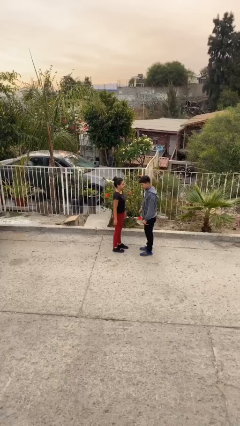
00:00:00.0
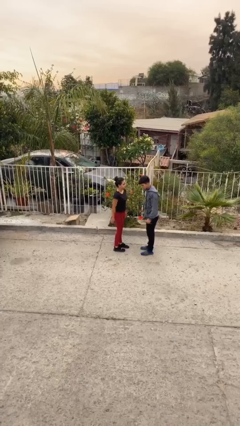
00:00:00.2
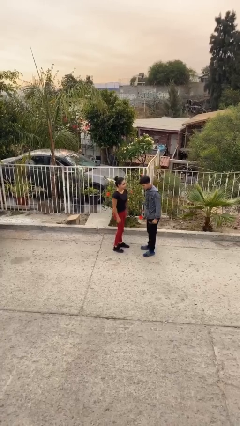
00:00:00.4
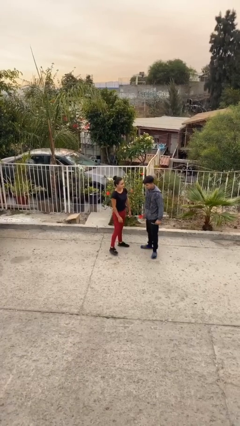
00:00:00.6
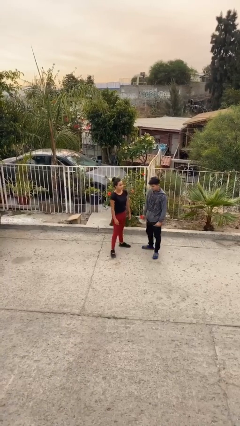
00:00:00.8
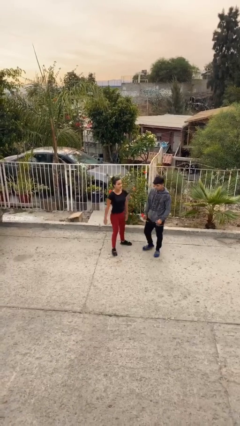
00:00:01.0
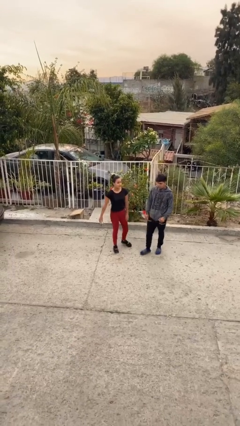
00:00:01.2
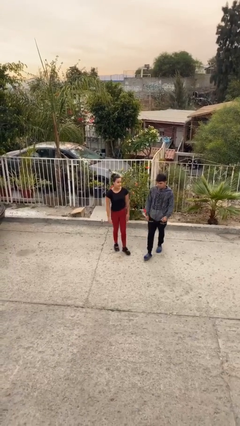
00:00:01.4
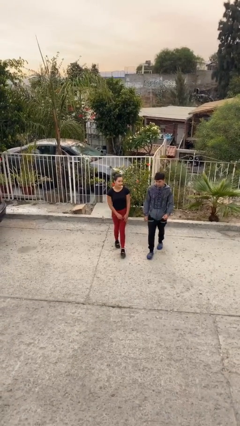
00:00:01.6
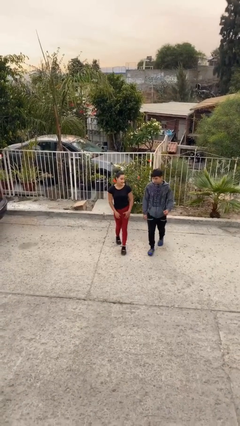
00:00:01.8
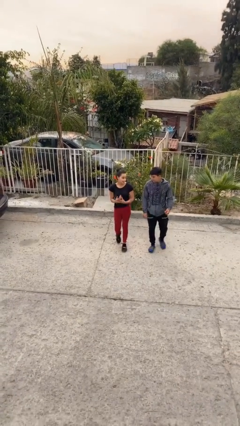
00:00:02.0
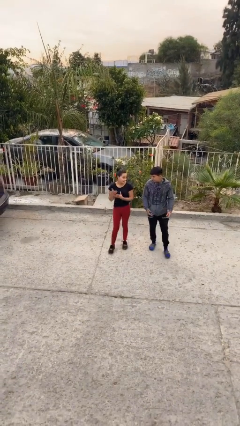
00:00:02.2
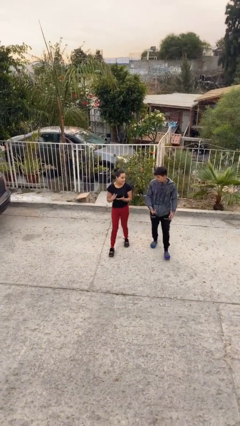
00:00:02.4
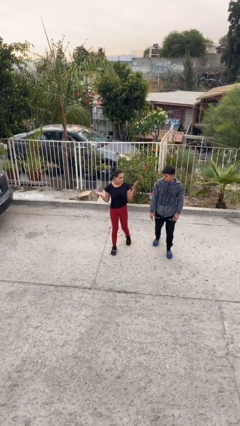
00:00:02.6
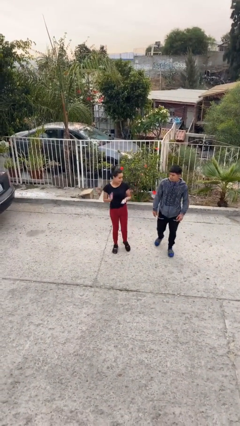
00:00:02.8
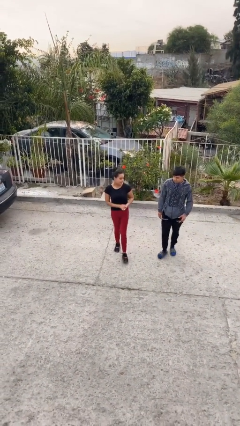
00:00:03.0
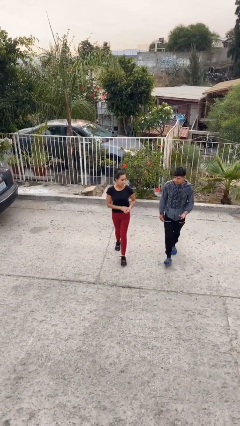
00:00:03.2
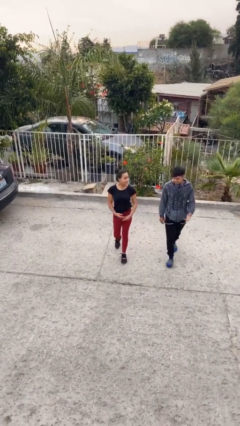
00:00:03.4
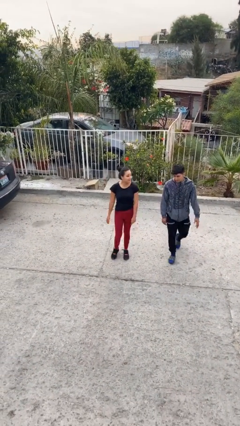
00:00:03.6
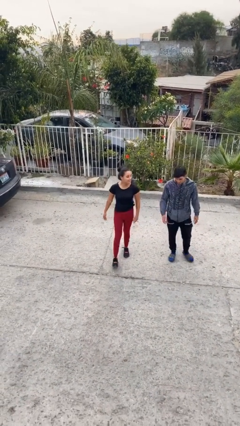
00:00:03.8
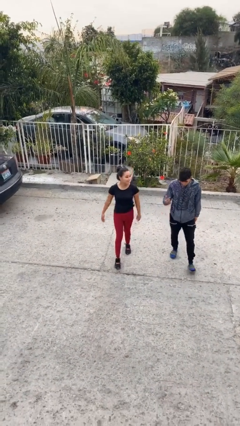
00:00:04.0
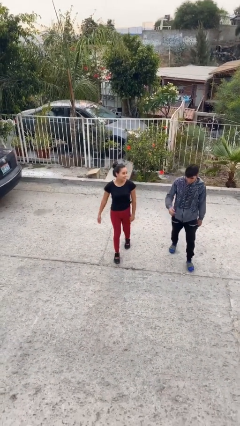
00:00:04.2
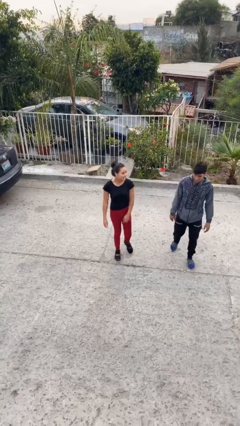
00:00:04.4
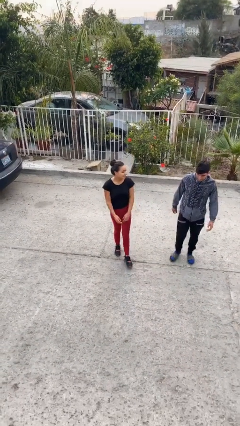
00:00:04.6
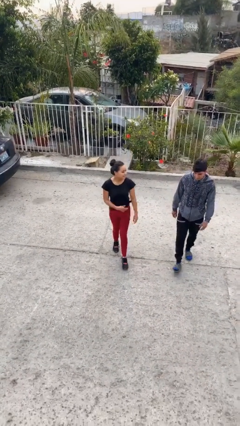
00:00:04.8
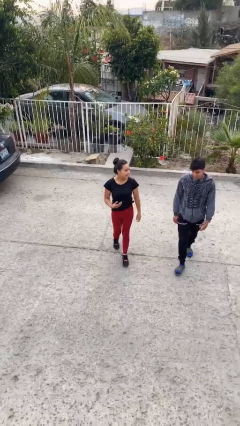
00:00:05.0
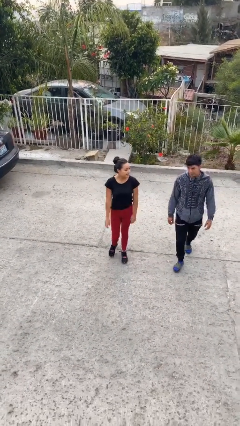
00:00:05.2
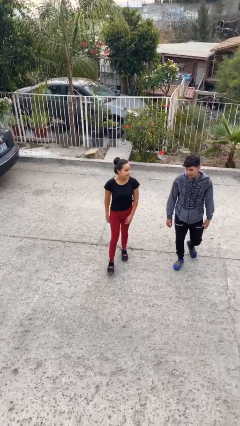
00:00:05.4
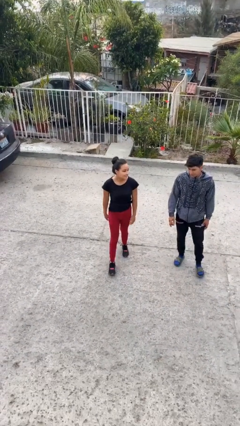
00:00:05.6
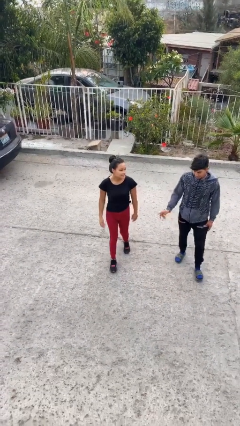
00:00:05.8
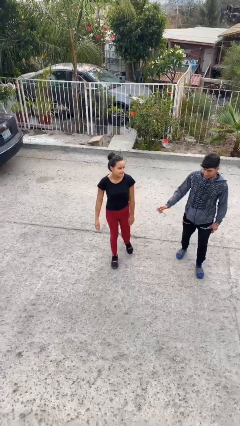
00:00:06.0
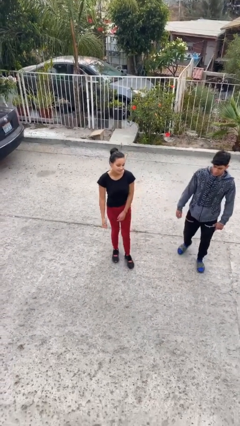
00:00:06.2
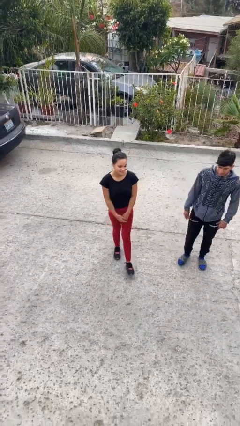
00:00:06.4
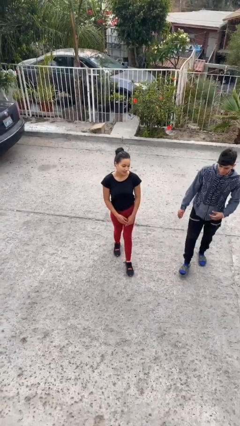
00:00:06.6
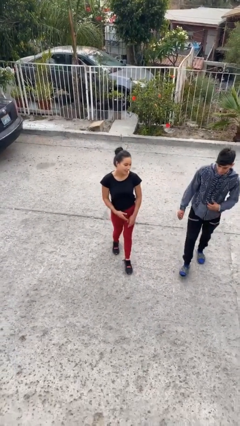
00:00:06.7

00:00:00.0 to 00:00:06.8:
person talks to person

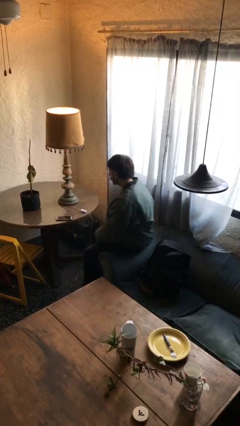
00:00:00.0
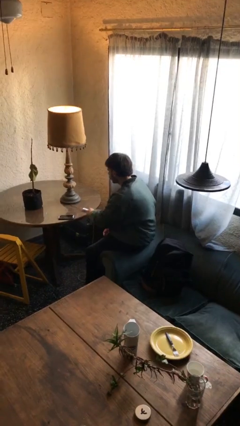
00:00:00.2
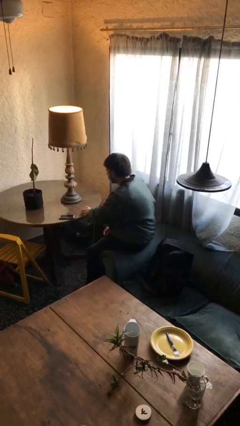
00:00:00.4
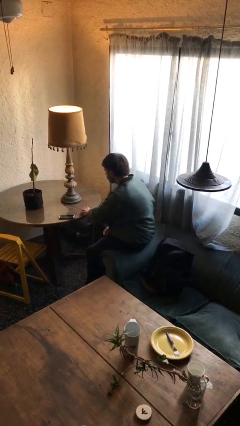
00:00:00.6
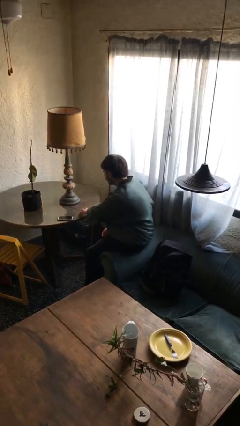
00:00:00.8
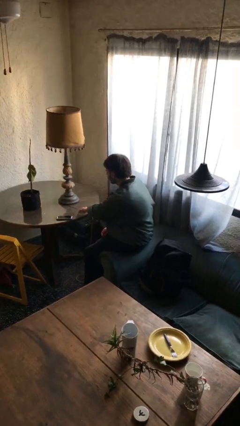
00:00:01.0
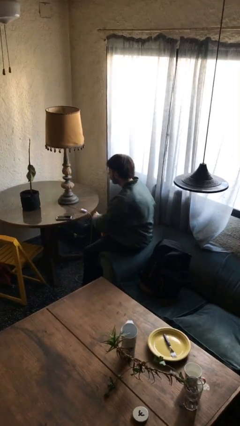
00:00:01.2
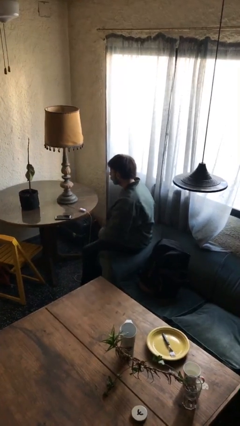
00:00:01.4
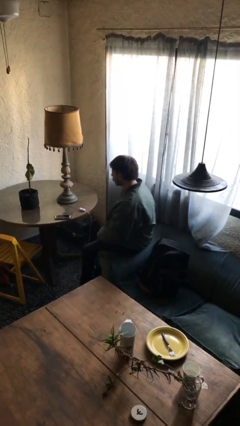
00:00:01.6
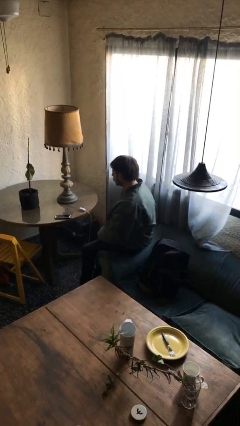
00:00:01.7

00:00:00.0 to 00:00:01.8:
person turns off lamp

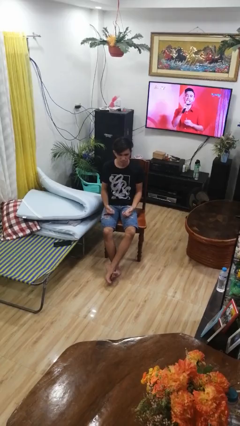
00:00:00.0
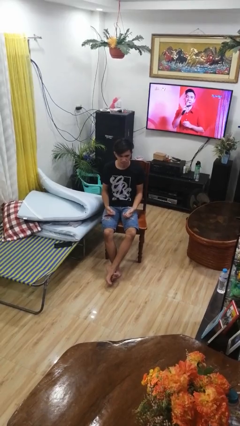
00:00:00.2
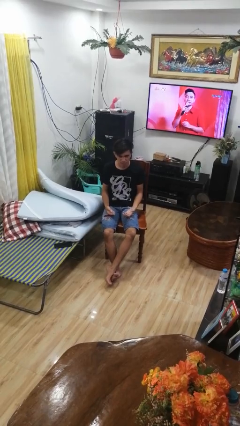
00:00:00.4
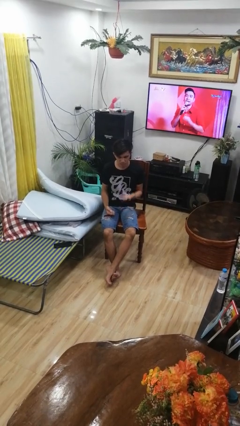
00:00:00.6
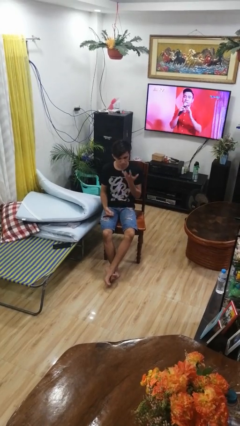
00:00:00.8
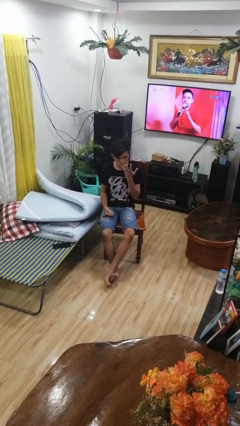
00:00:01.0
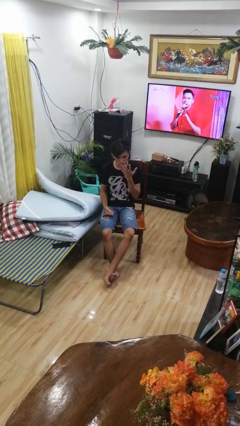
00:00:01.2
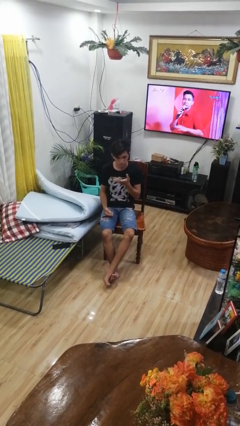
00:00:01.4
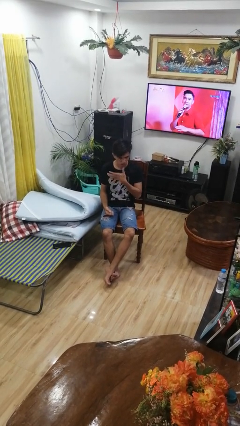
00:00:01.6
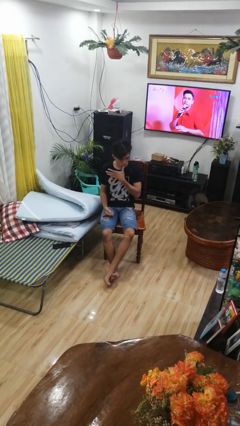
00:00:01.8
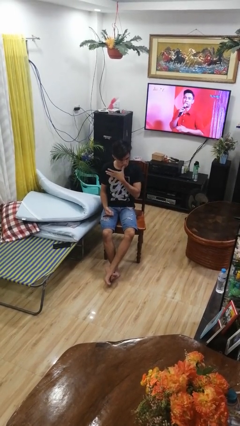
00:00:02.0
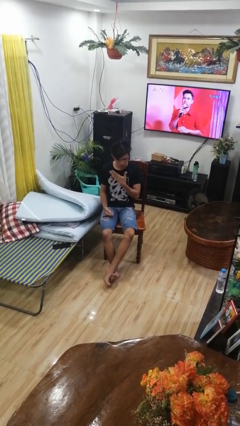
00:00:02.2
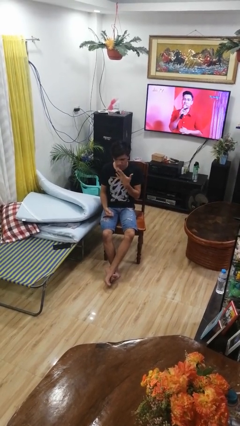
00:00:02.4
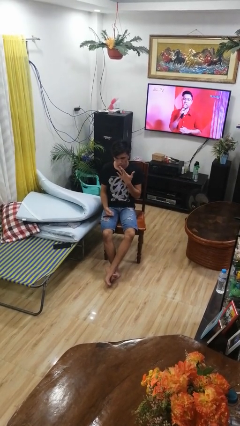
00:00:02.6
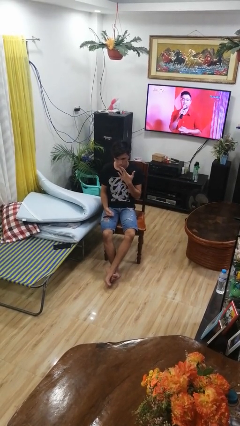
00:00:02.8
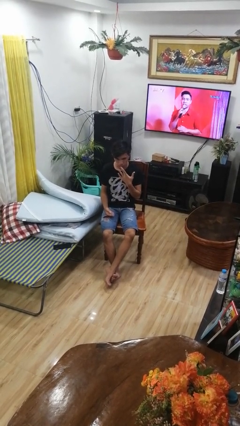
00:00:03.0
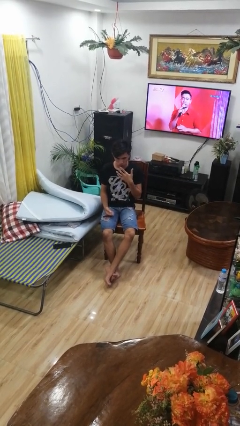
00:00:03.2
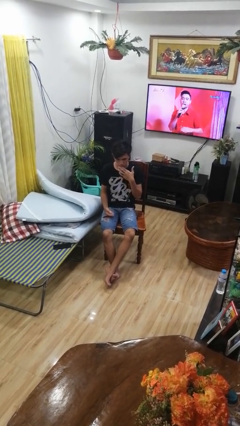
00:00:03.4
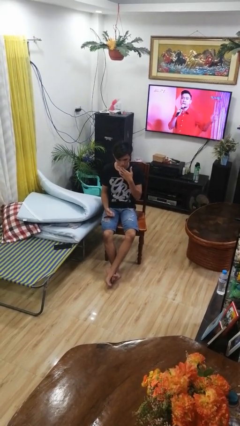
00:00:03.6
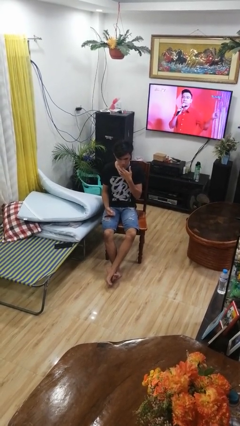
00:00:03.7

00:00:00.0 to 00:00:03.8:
person licks fingers

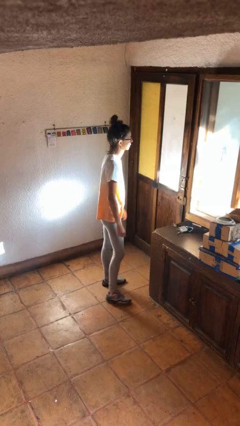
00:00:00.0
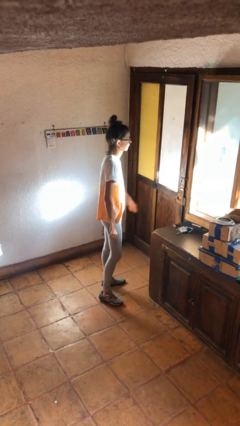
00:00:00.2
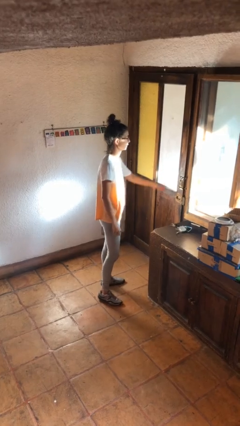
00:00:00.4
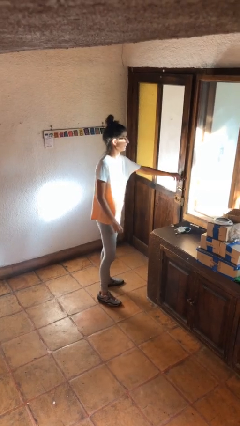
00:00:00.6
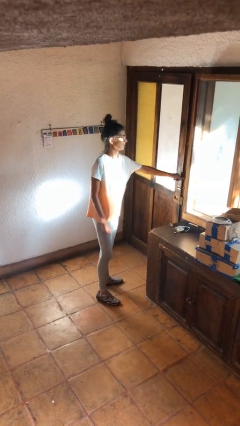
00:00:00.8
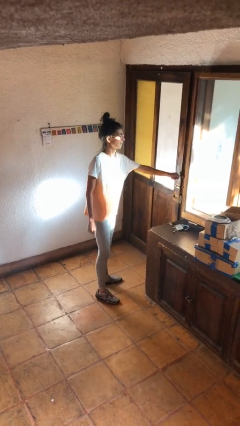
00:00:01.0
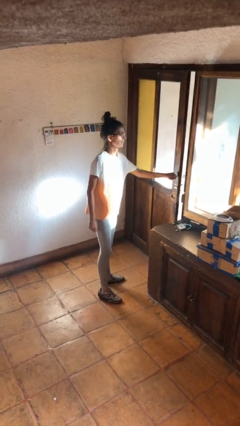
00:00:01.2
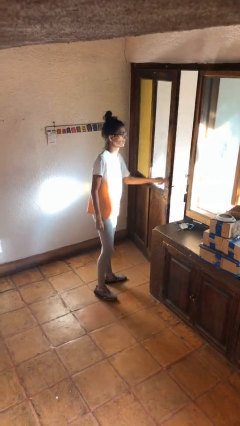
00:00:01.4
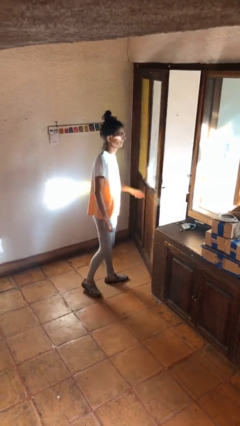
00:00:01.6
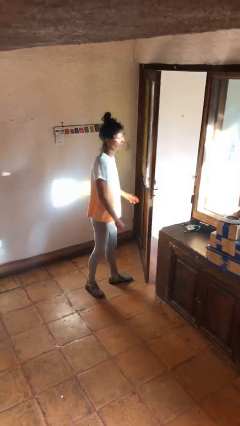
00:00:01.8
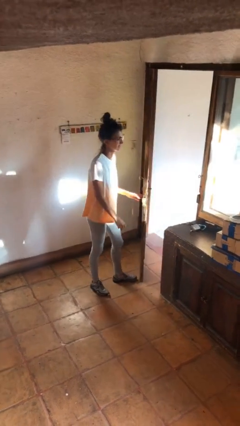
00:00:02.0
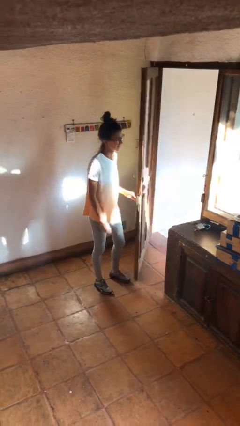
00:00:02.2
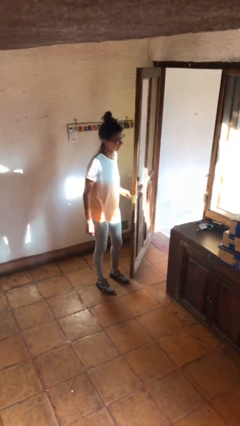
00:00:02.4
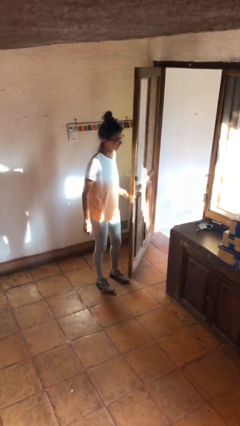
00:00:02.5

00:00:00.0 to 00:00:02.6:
person opens facility door

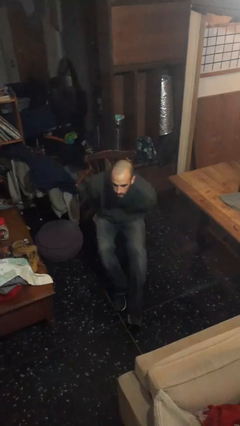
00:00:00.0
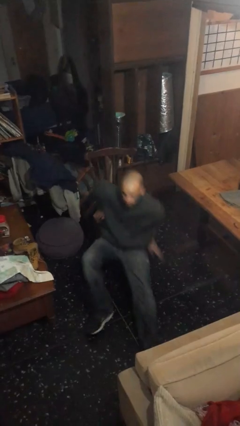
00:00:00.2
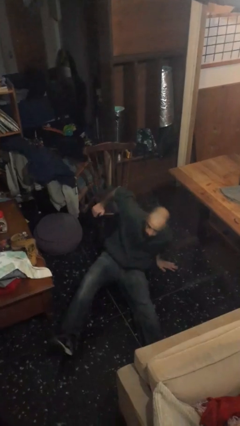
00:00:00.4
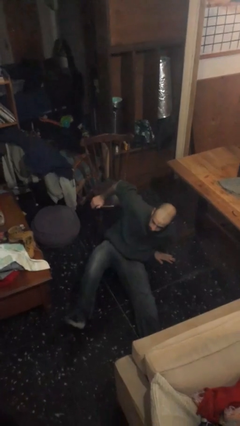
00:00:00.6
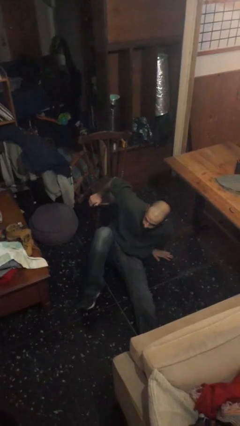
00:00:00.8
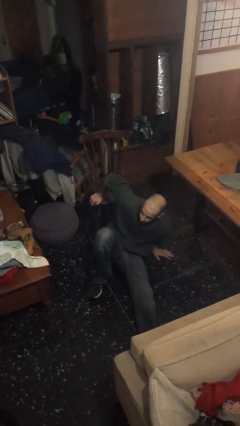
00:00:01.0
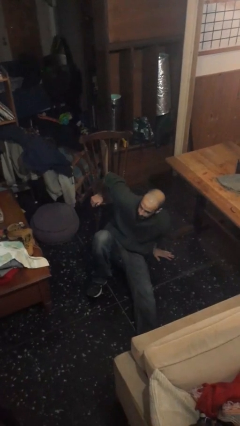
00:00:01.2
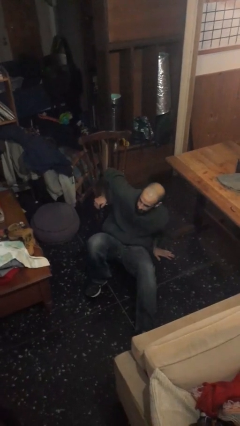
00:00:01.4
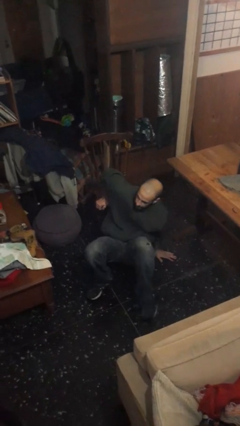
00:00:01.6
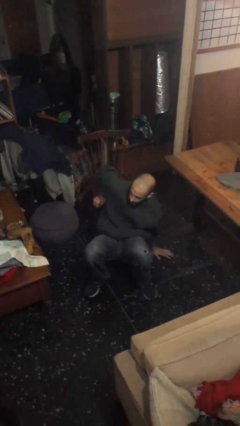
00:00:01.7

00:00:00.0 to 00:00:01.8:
person falls from chair

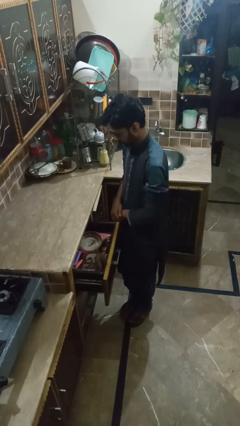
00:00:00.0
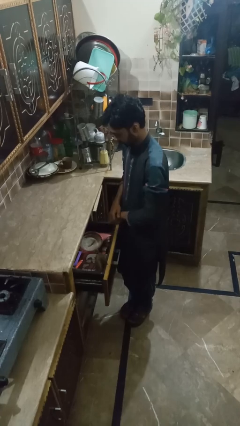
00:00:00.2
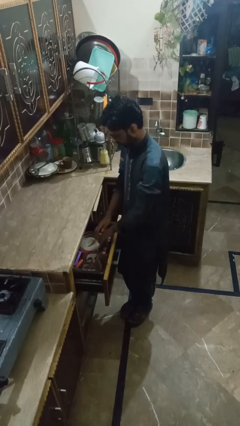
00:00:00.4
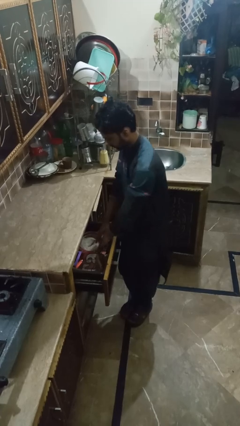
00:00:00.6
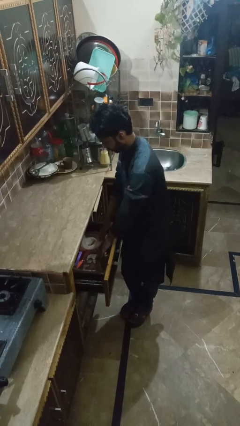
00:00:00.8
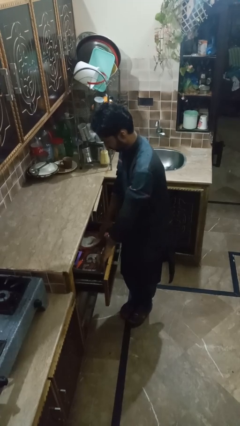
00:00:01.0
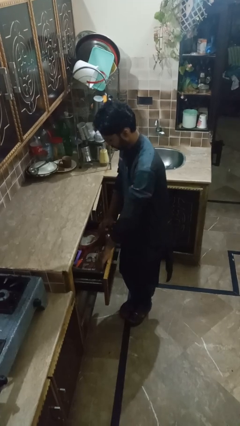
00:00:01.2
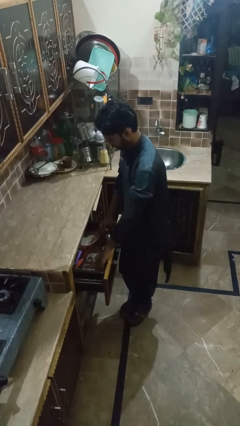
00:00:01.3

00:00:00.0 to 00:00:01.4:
person searches in kitchen drawer
